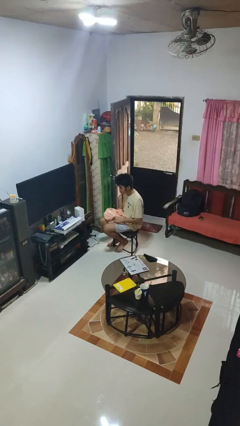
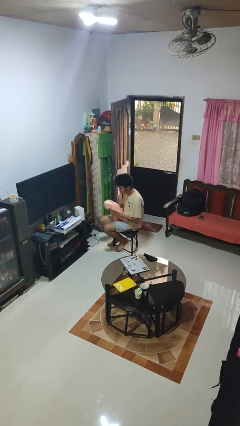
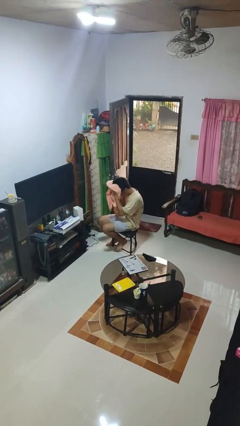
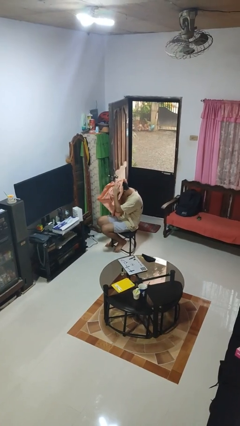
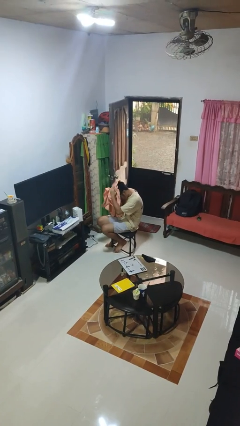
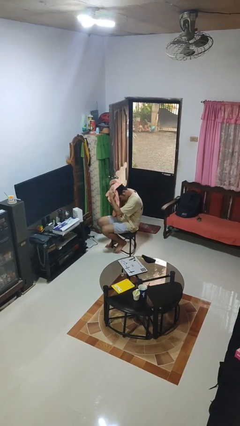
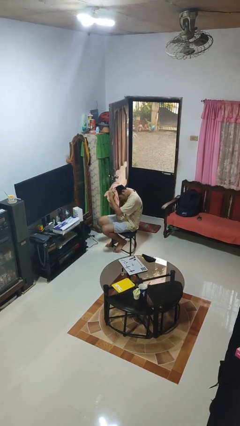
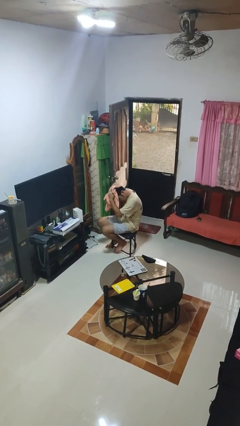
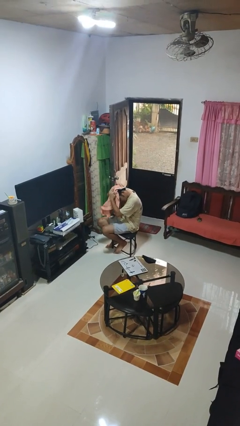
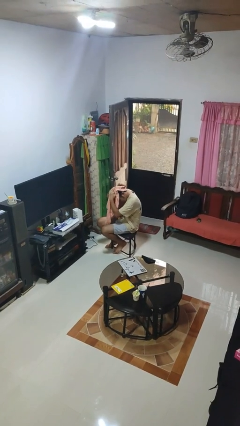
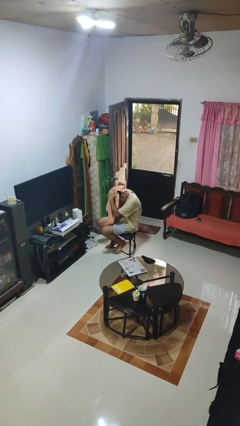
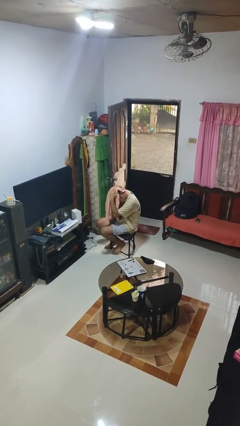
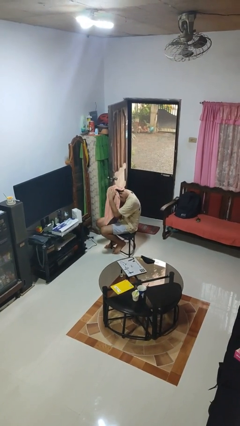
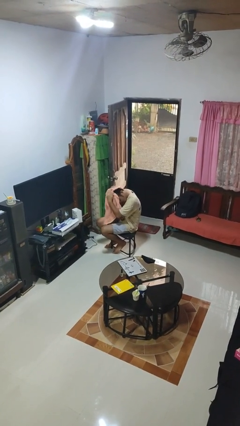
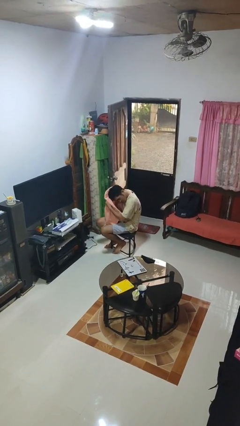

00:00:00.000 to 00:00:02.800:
person dries hair with towel

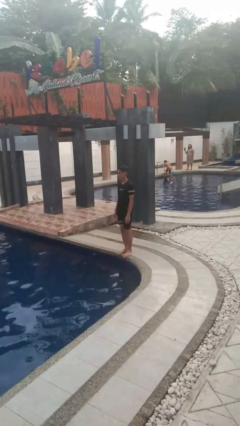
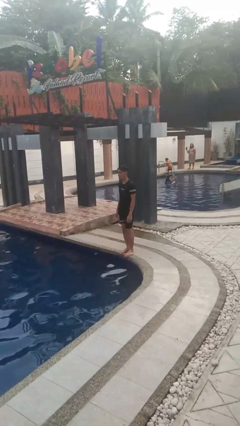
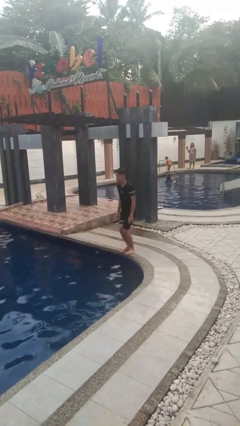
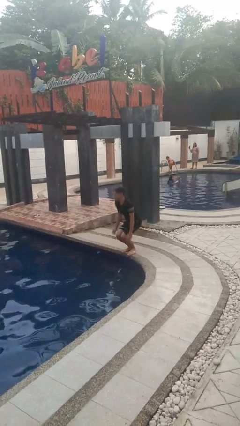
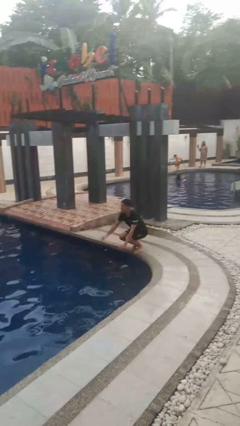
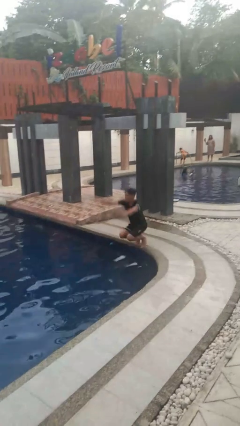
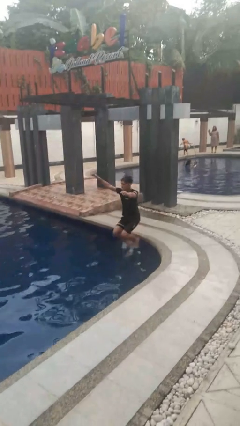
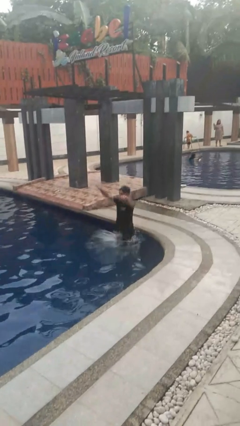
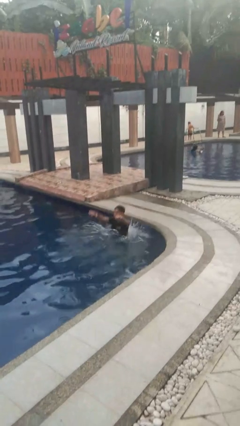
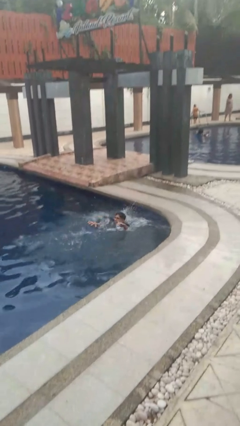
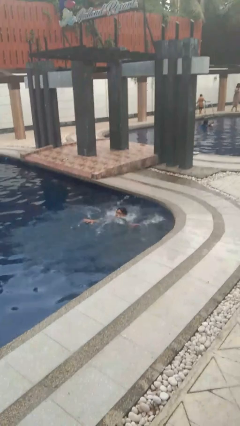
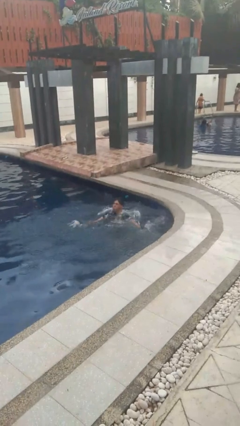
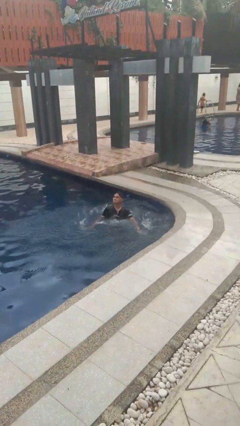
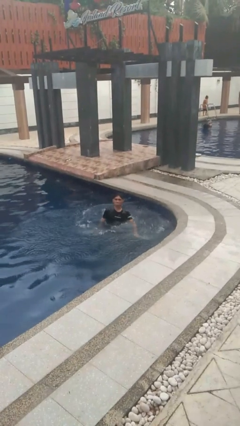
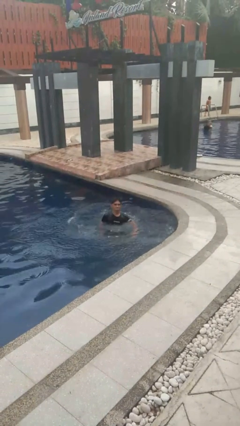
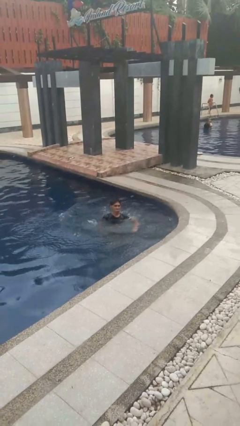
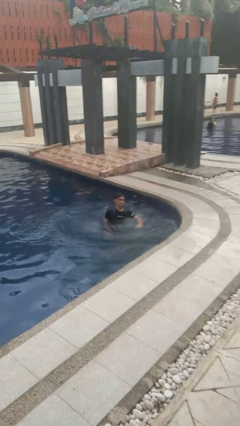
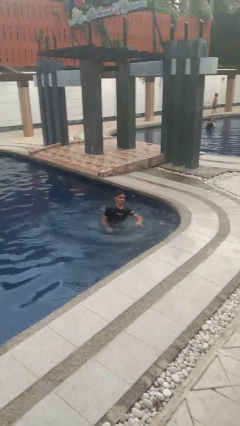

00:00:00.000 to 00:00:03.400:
person jumps into pool

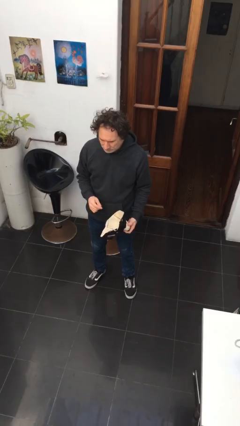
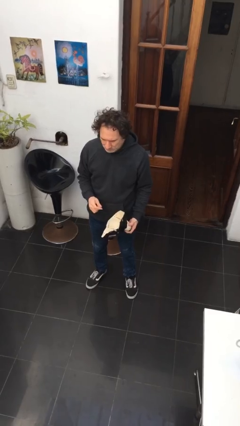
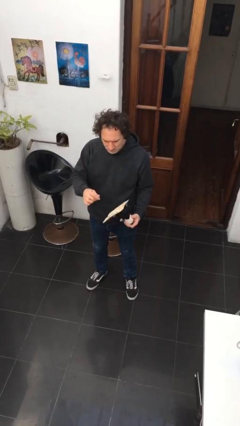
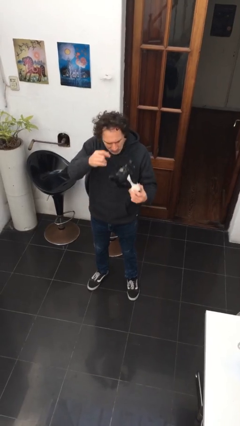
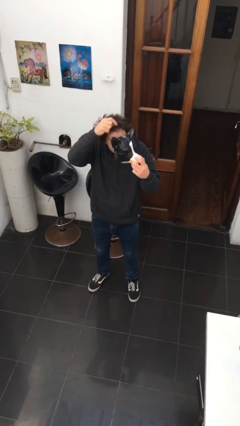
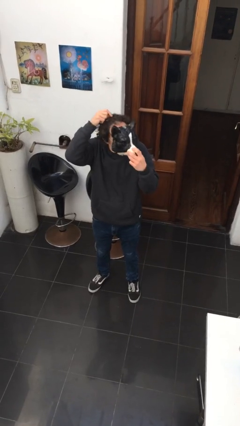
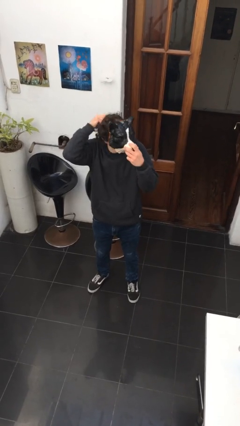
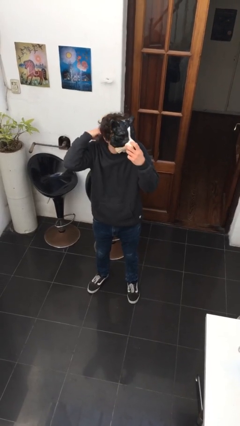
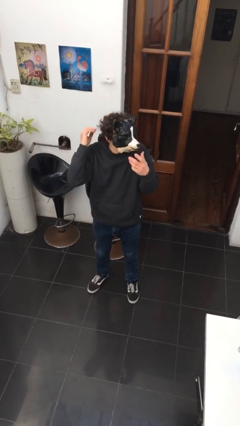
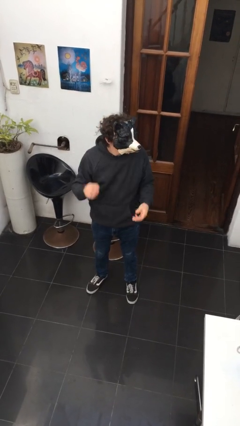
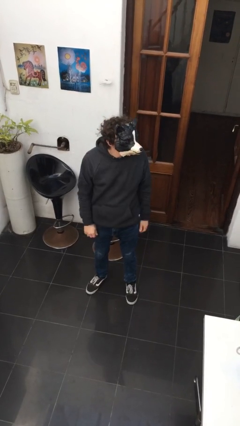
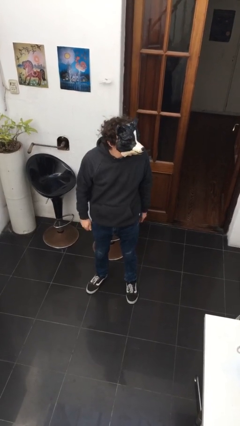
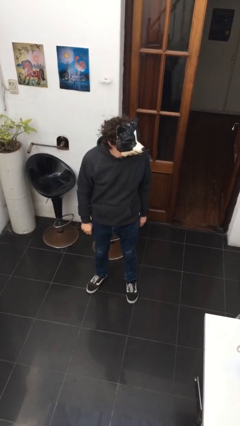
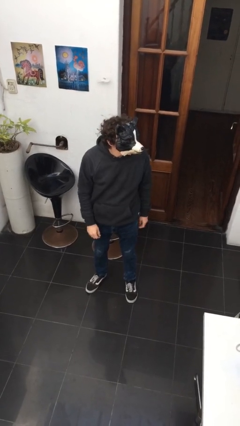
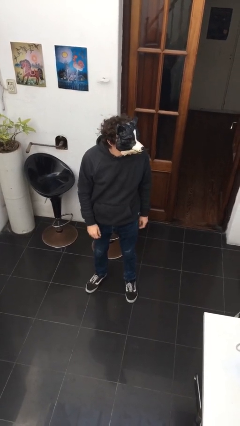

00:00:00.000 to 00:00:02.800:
person puts on facemask

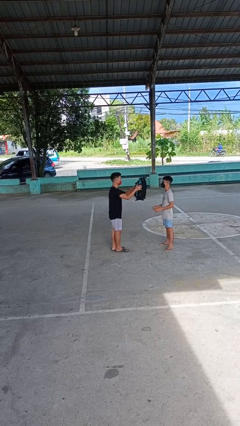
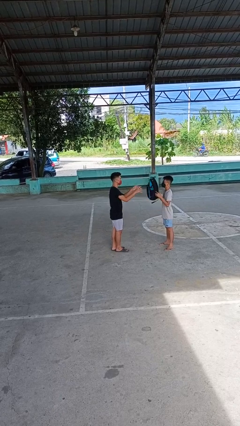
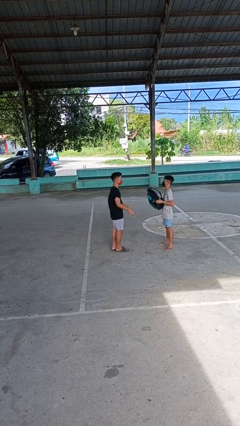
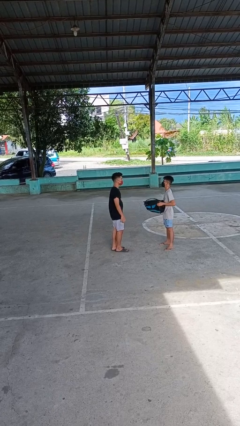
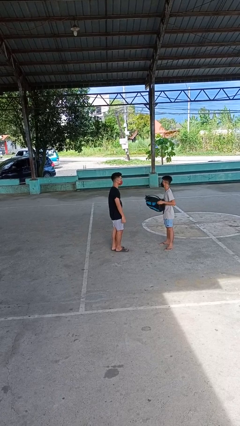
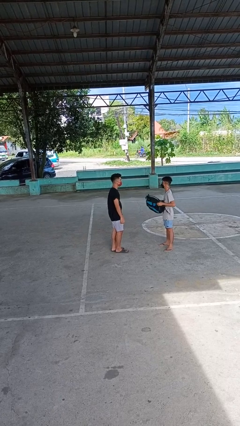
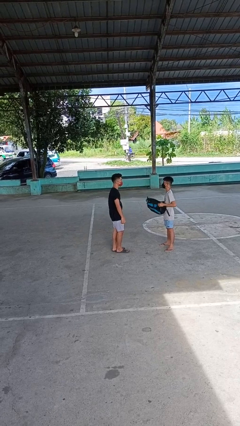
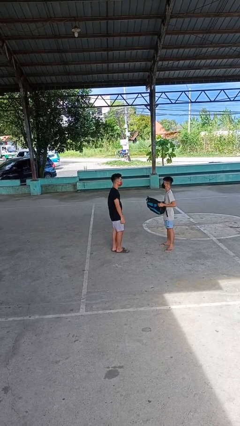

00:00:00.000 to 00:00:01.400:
person throws object to person

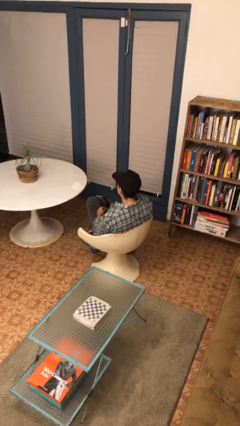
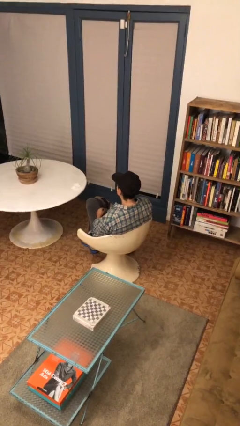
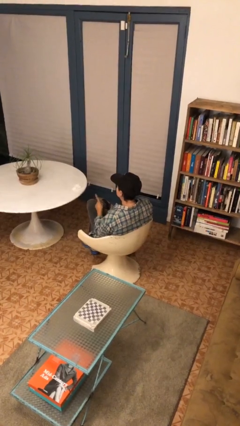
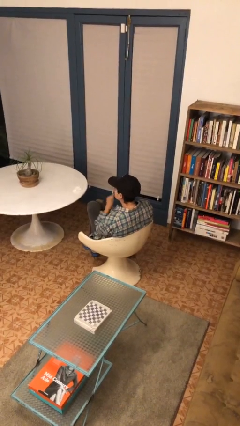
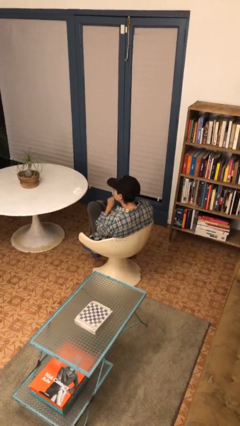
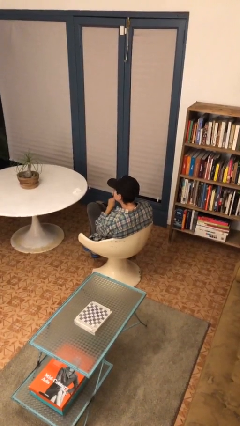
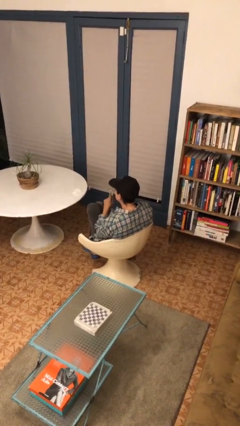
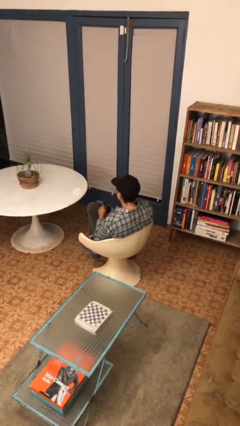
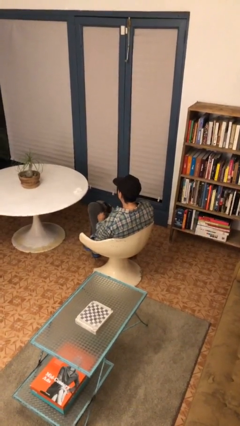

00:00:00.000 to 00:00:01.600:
person gestures be quiet

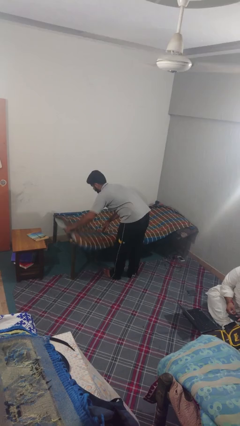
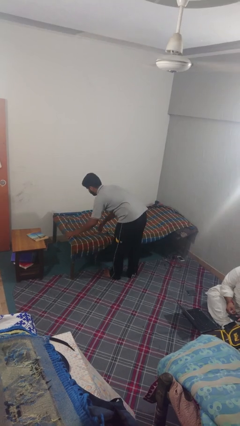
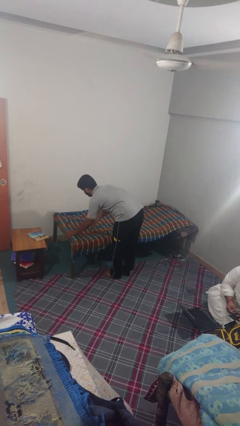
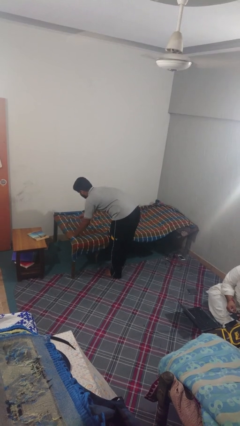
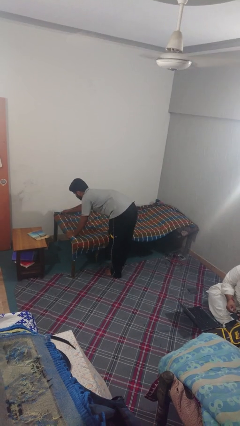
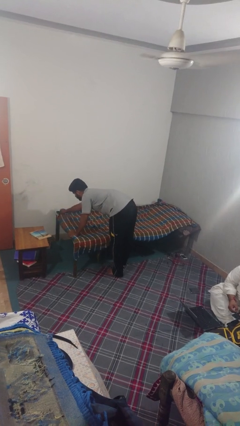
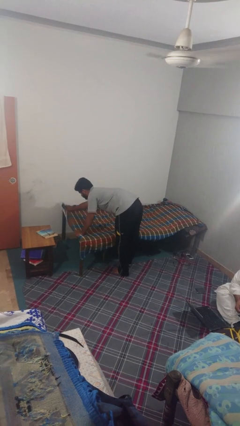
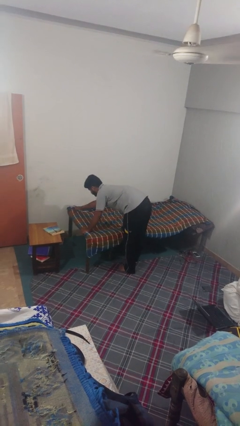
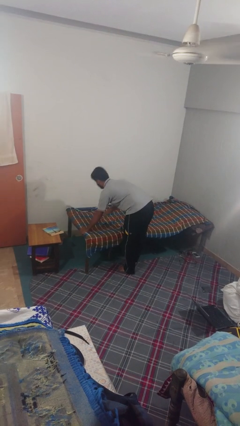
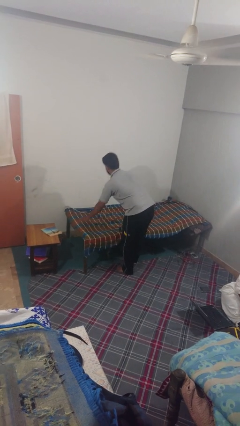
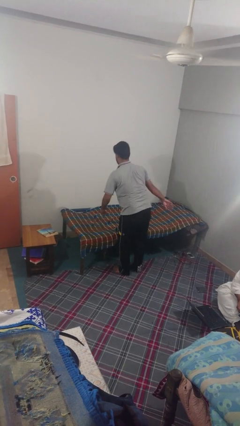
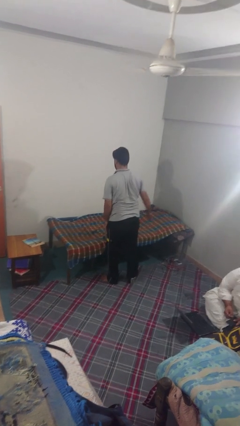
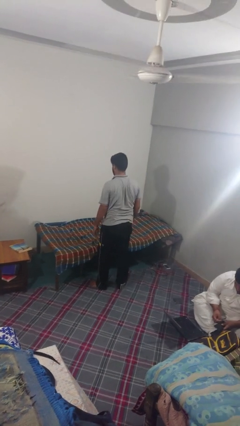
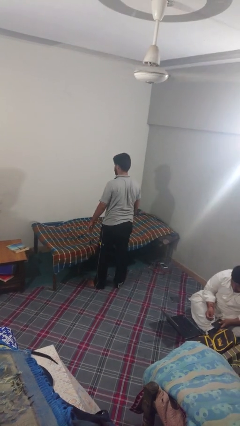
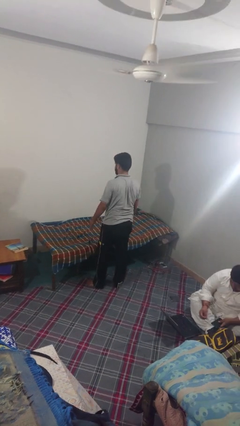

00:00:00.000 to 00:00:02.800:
person makes bed

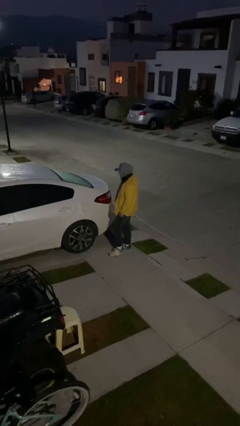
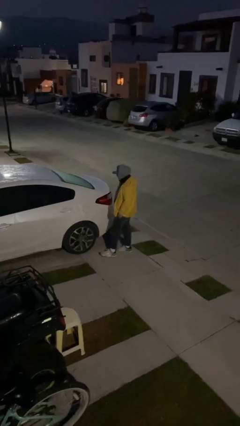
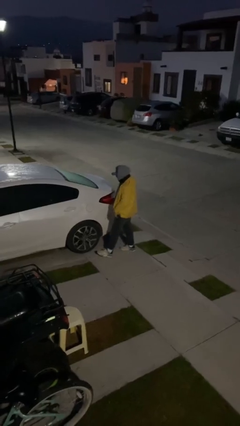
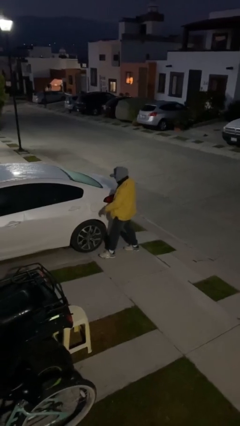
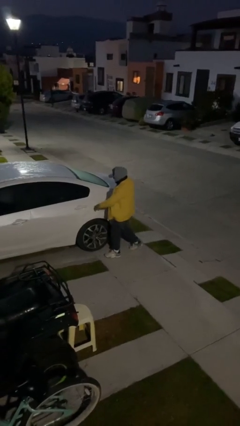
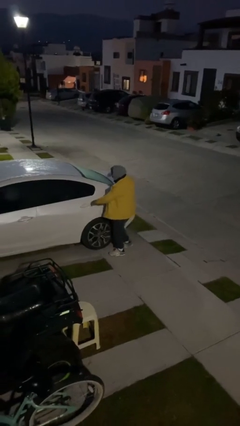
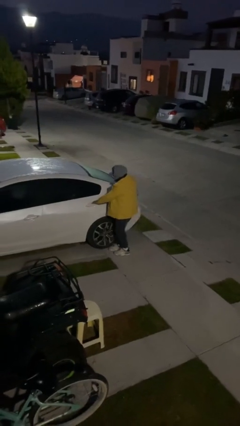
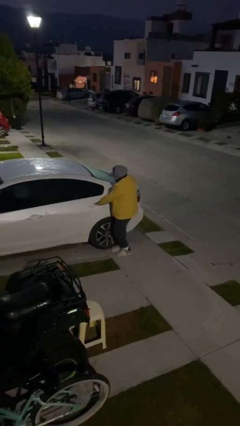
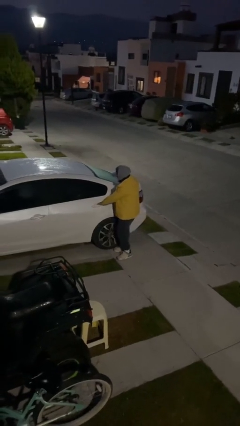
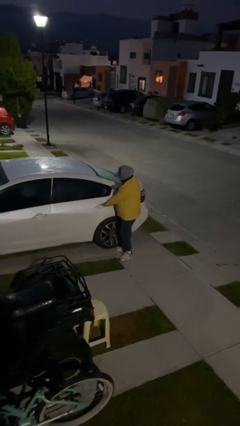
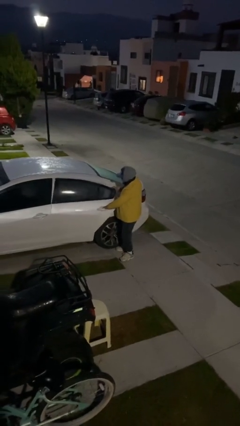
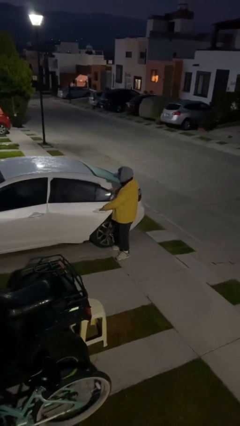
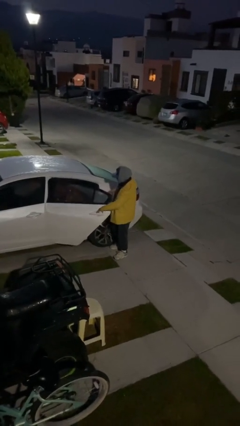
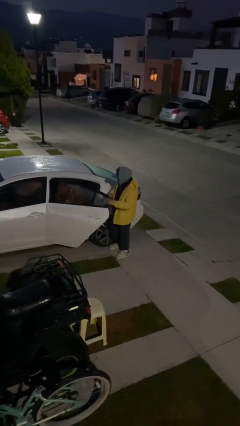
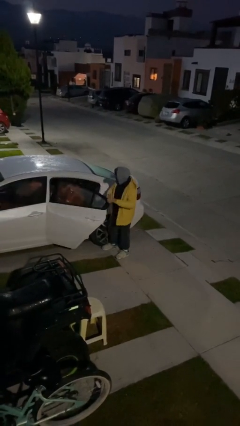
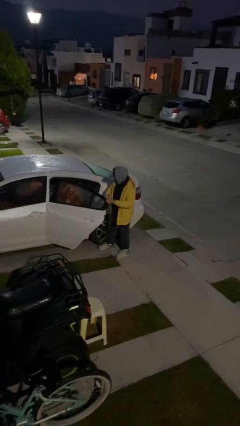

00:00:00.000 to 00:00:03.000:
person opens car door
